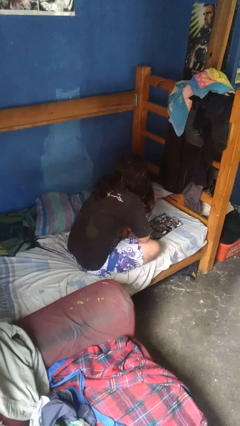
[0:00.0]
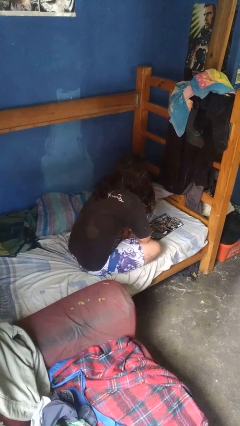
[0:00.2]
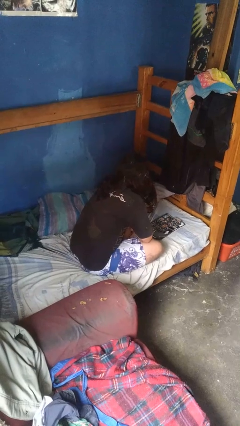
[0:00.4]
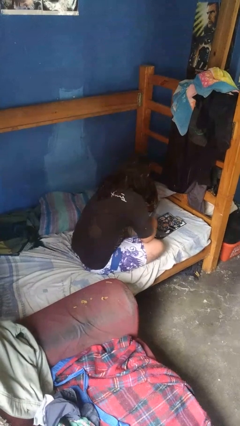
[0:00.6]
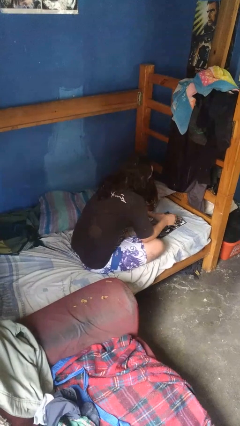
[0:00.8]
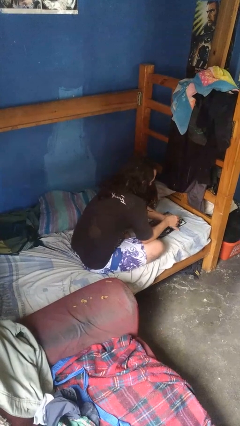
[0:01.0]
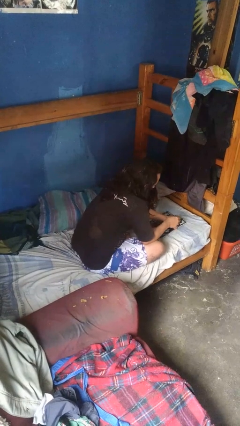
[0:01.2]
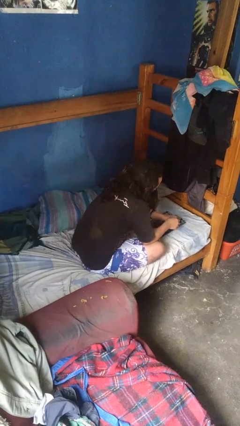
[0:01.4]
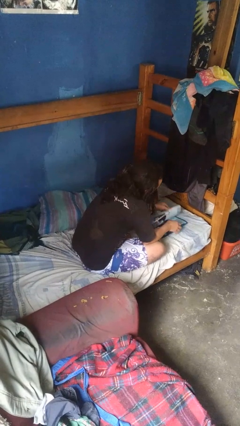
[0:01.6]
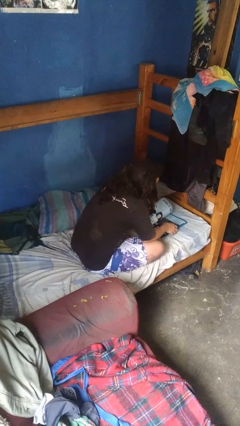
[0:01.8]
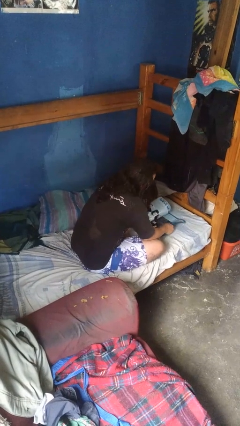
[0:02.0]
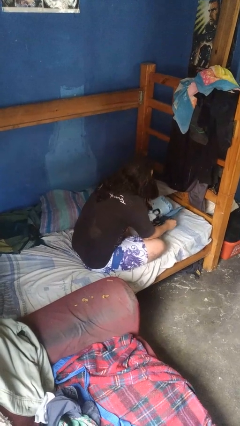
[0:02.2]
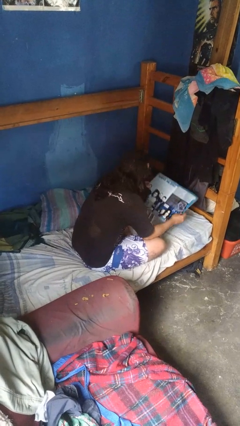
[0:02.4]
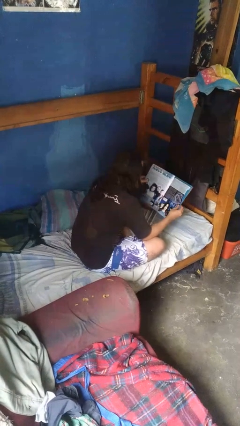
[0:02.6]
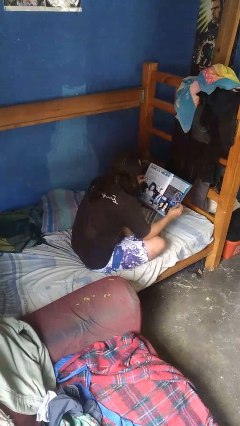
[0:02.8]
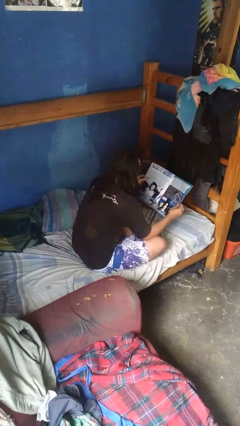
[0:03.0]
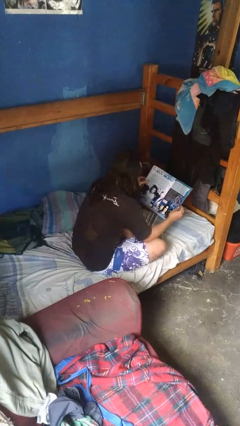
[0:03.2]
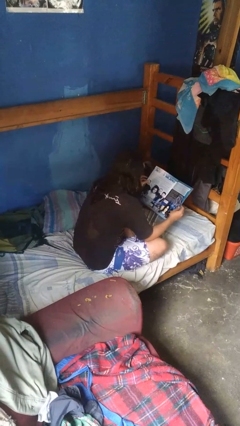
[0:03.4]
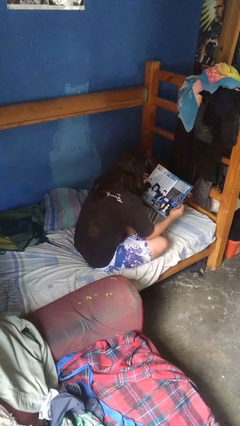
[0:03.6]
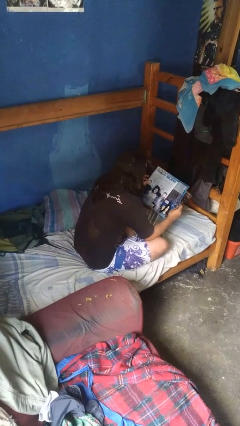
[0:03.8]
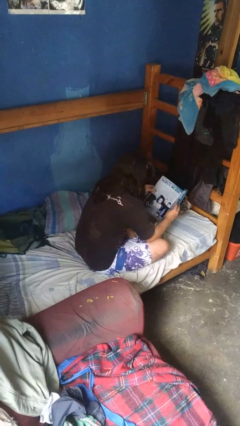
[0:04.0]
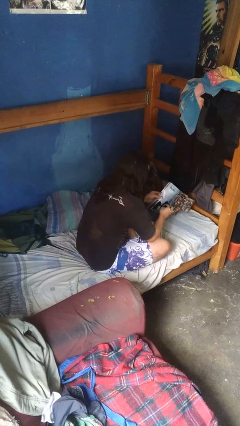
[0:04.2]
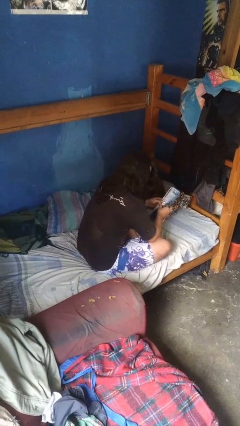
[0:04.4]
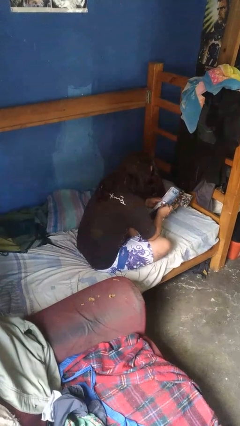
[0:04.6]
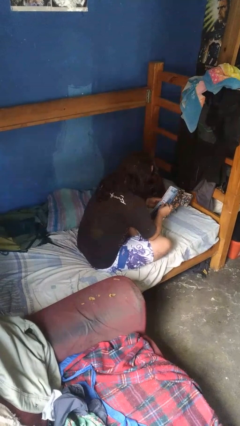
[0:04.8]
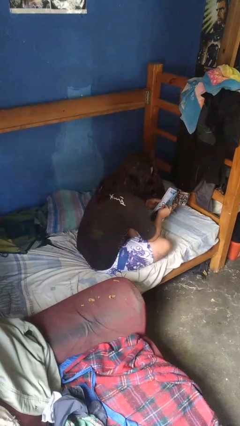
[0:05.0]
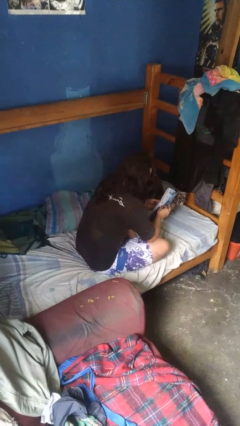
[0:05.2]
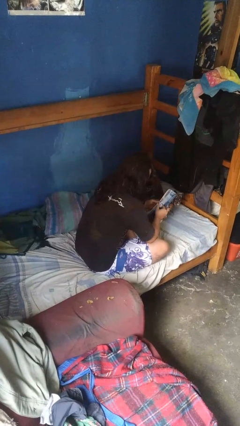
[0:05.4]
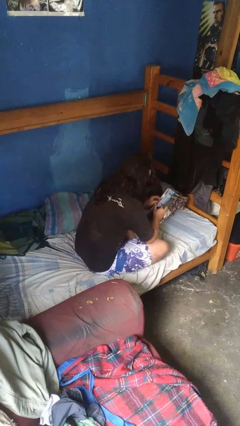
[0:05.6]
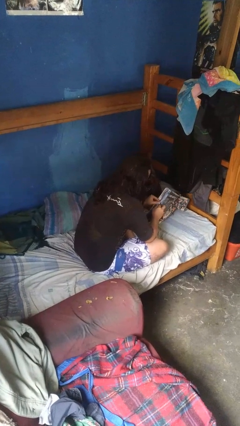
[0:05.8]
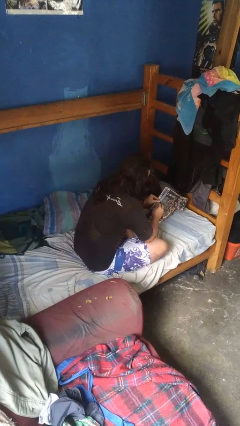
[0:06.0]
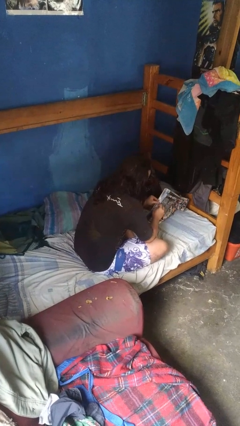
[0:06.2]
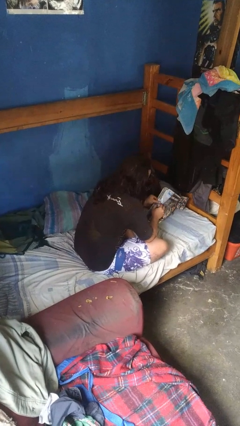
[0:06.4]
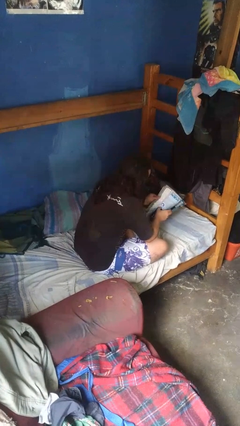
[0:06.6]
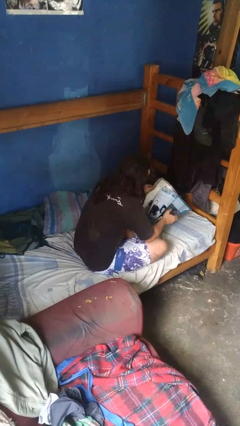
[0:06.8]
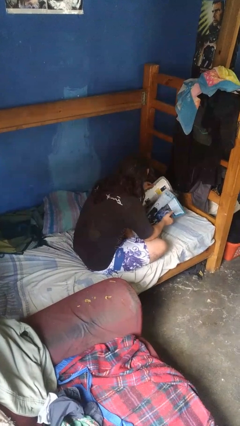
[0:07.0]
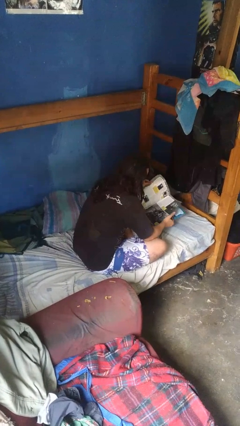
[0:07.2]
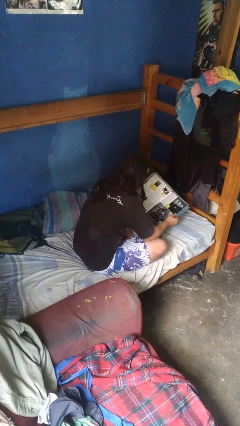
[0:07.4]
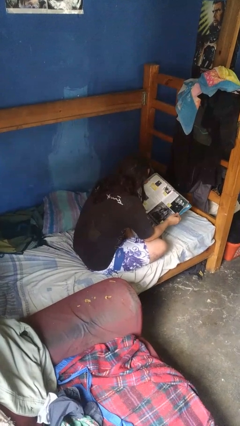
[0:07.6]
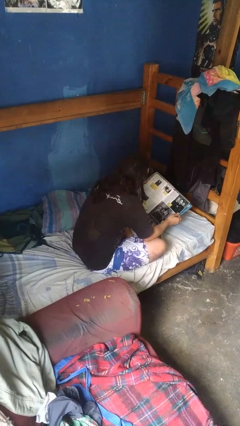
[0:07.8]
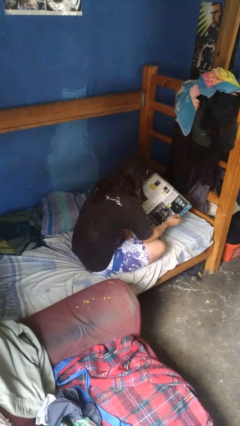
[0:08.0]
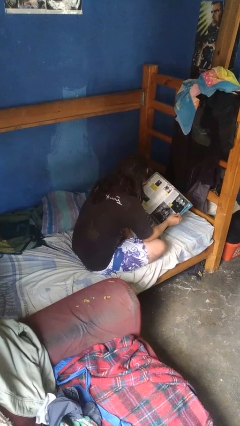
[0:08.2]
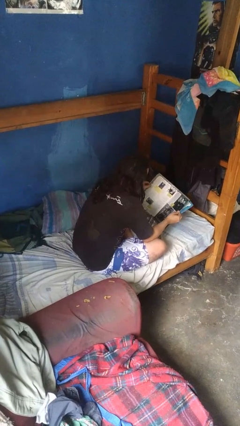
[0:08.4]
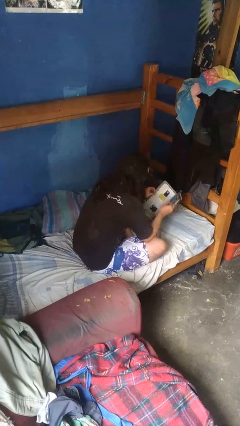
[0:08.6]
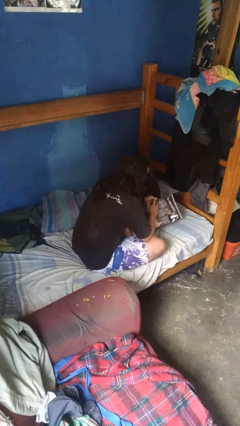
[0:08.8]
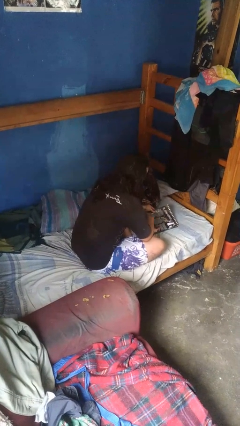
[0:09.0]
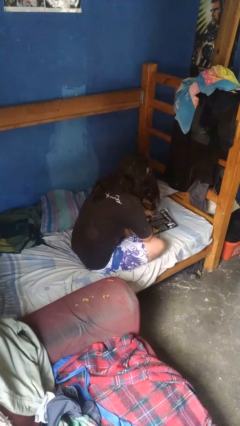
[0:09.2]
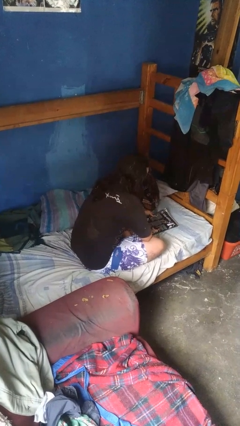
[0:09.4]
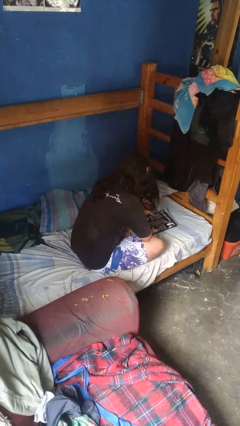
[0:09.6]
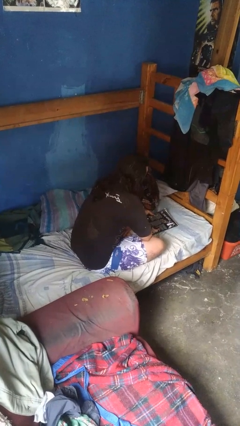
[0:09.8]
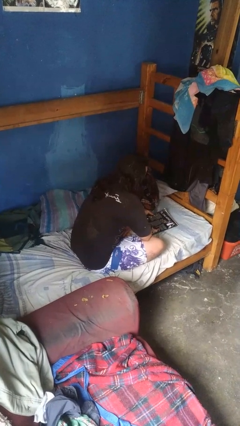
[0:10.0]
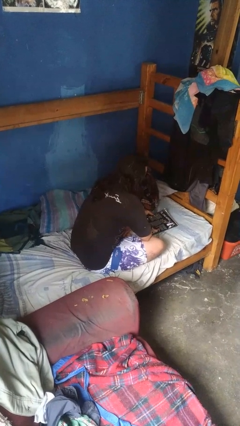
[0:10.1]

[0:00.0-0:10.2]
person reads magazine

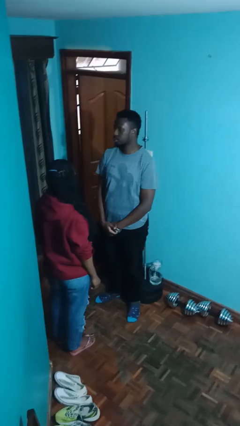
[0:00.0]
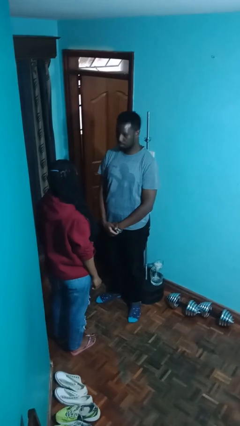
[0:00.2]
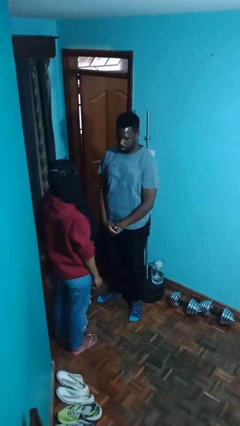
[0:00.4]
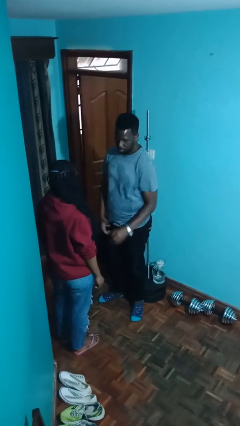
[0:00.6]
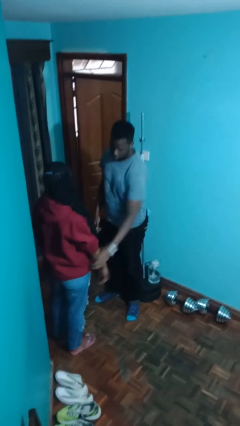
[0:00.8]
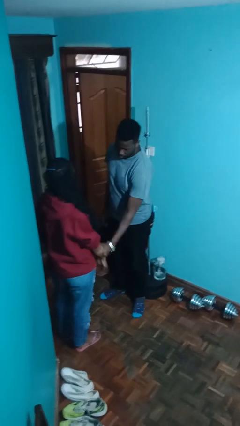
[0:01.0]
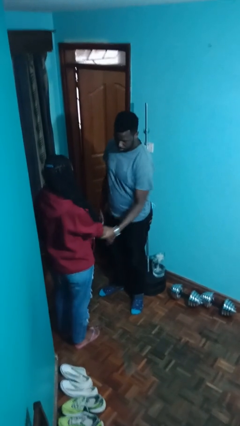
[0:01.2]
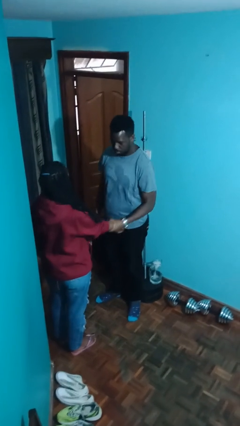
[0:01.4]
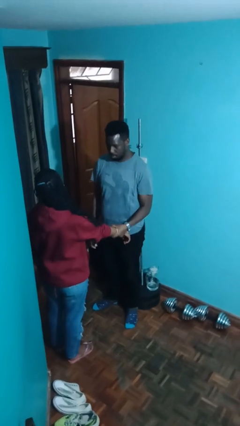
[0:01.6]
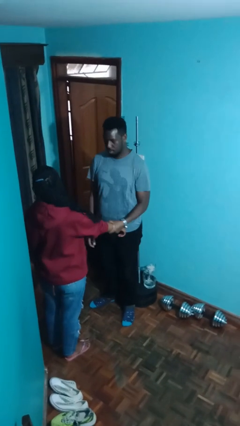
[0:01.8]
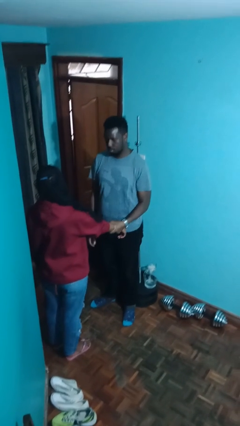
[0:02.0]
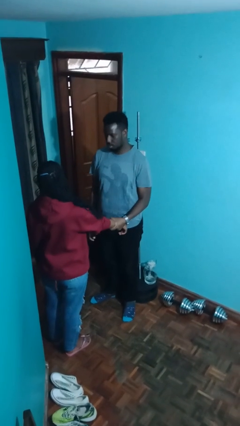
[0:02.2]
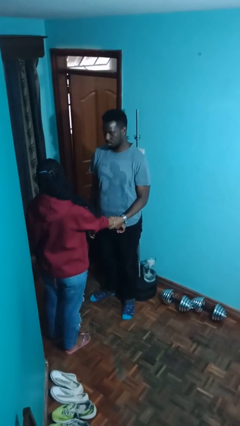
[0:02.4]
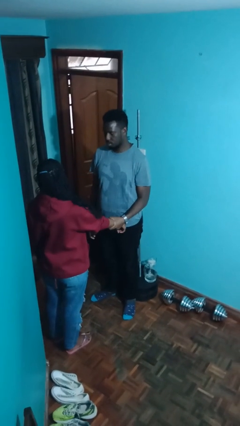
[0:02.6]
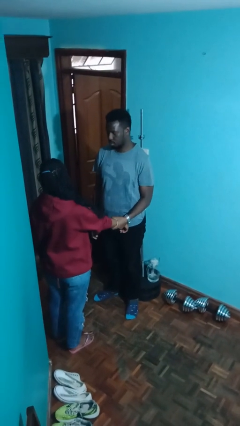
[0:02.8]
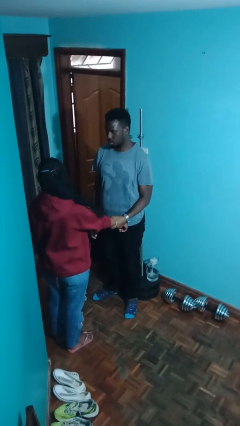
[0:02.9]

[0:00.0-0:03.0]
person grabs person by forearm

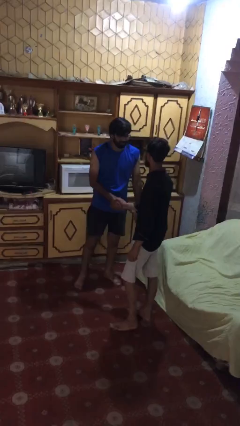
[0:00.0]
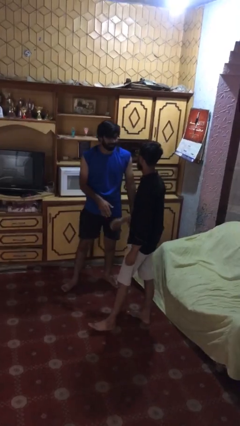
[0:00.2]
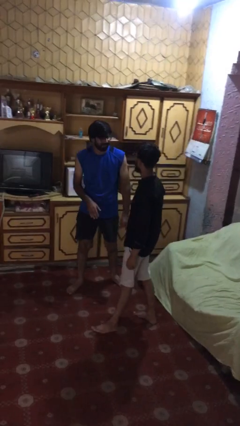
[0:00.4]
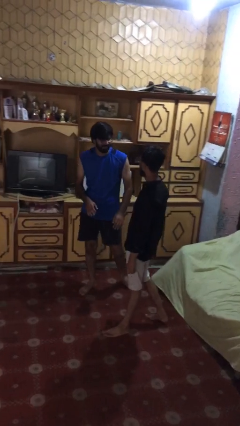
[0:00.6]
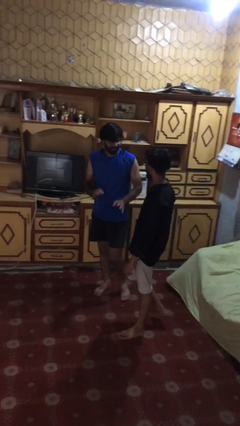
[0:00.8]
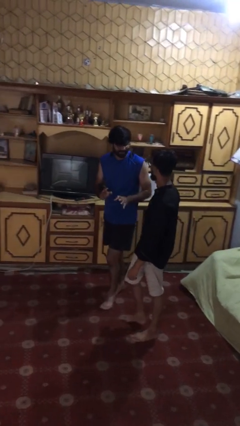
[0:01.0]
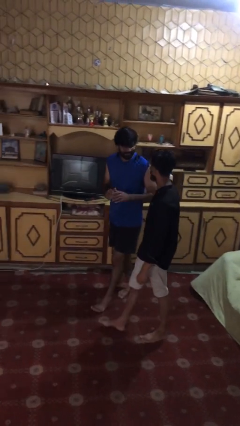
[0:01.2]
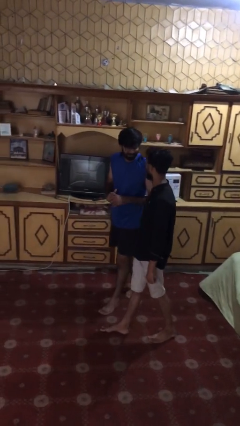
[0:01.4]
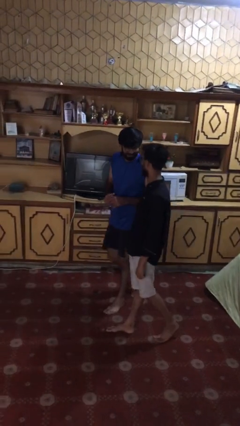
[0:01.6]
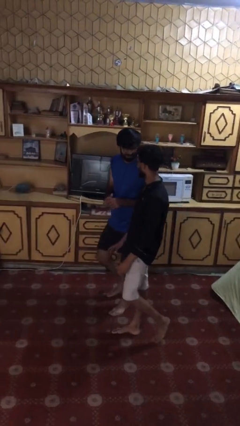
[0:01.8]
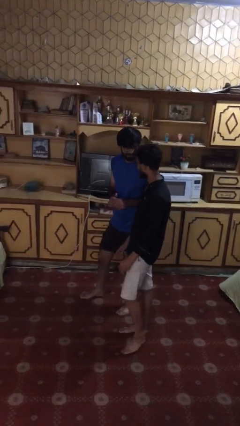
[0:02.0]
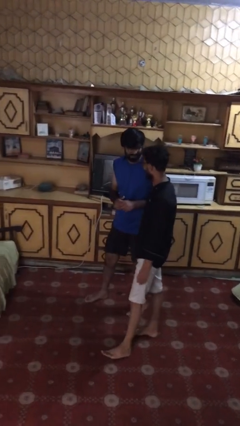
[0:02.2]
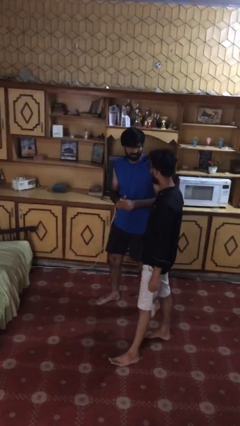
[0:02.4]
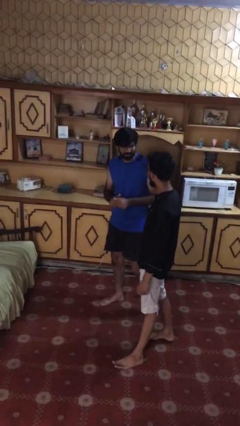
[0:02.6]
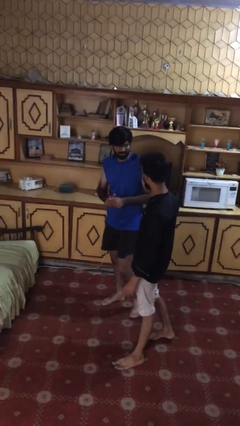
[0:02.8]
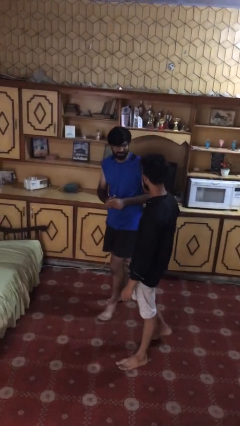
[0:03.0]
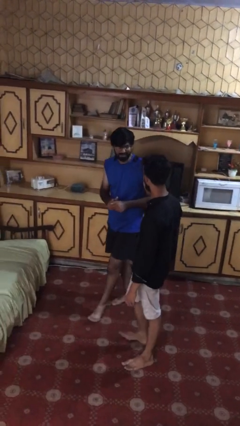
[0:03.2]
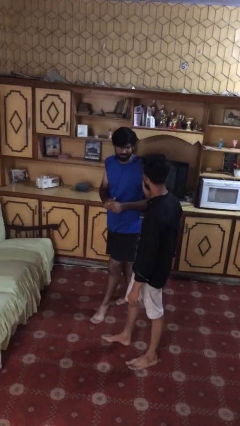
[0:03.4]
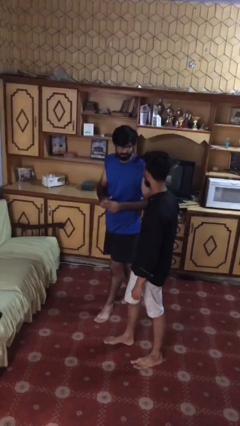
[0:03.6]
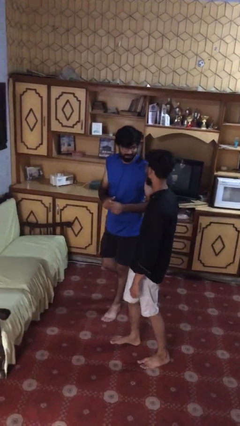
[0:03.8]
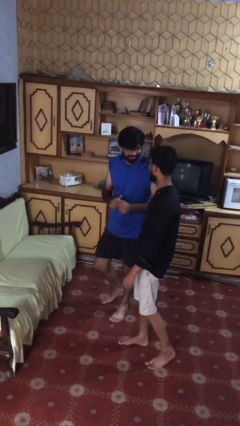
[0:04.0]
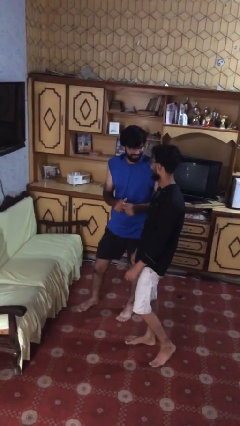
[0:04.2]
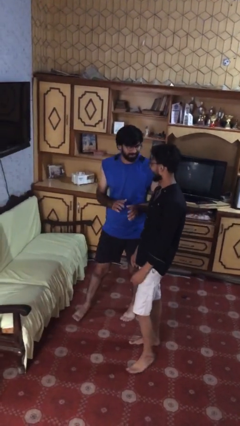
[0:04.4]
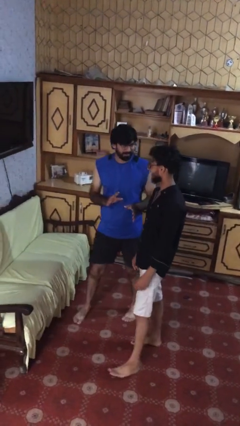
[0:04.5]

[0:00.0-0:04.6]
person talks to person

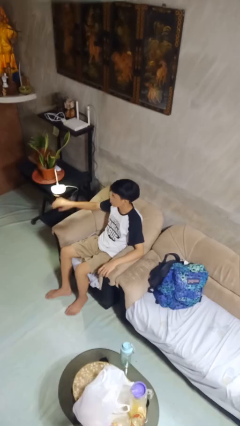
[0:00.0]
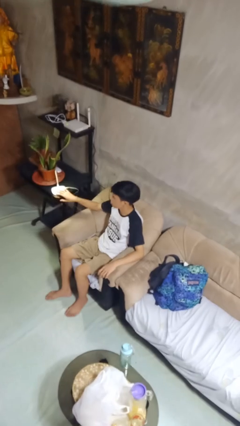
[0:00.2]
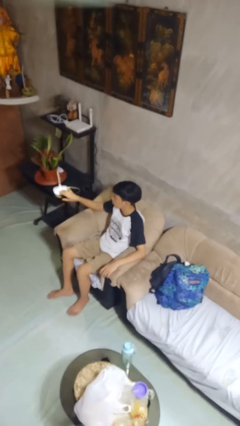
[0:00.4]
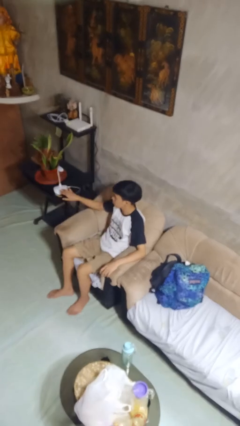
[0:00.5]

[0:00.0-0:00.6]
person turns off lamp
